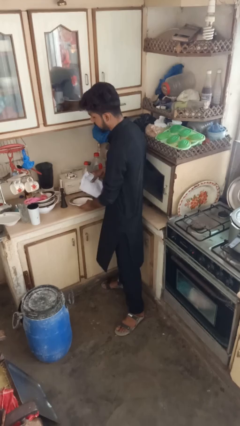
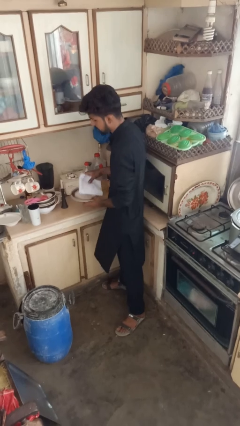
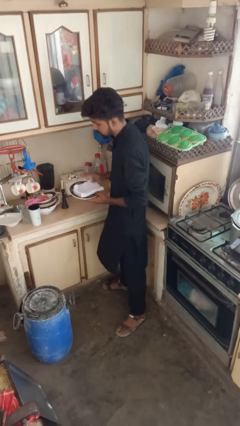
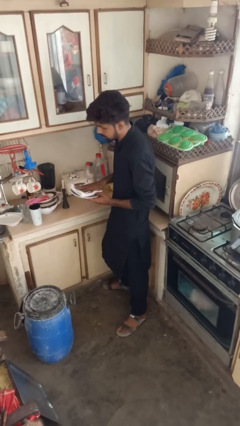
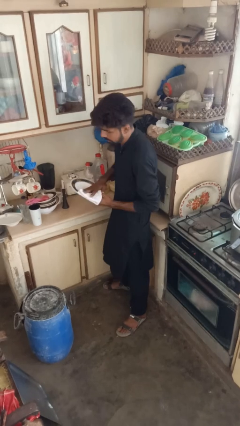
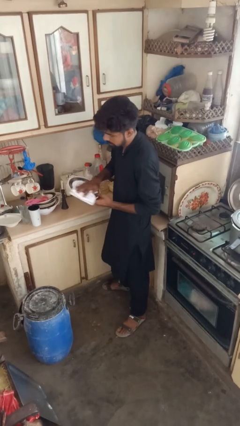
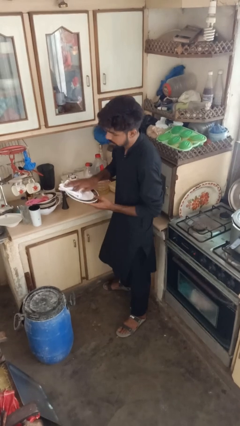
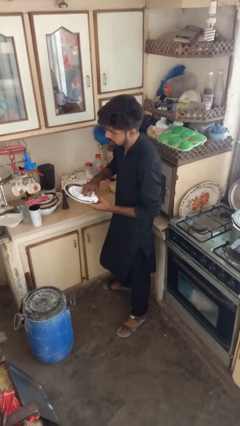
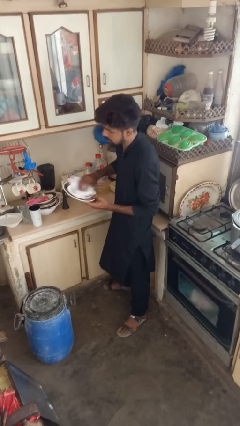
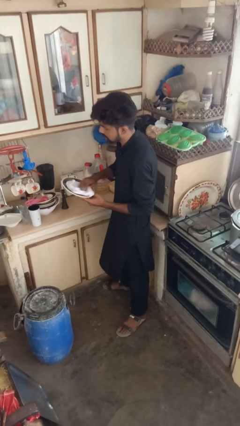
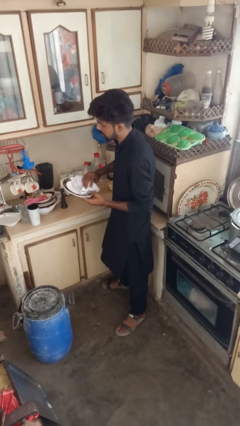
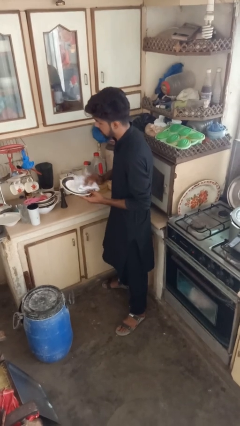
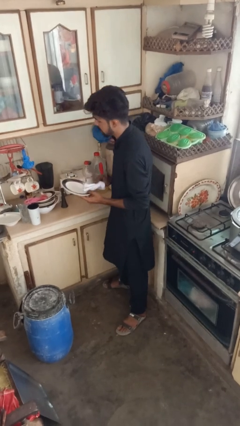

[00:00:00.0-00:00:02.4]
person dries dish

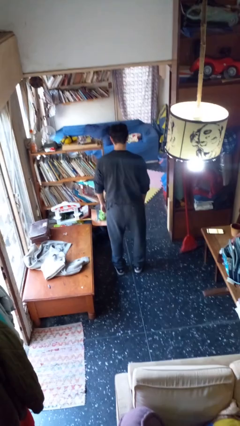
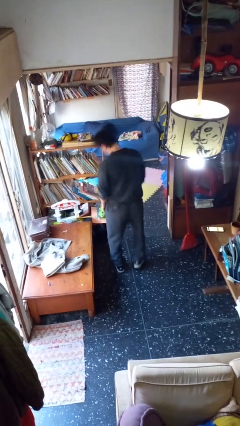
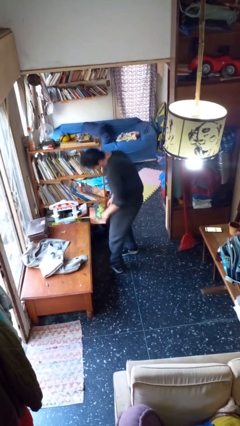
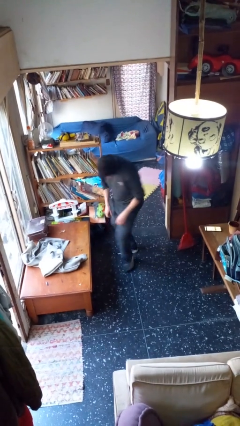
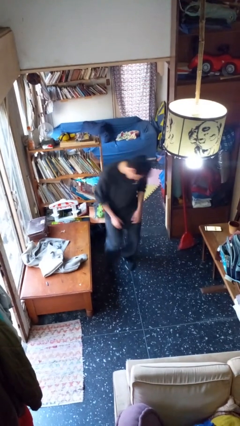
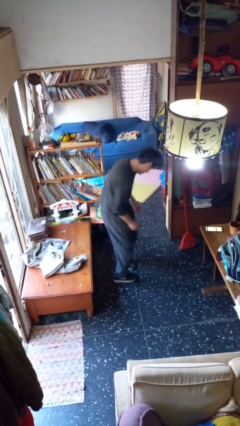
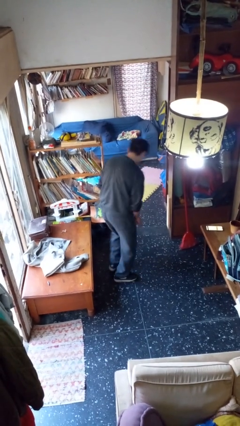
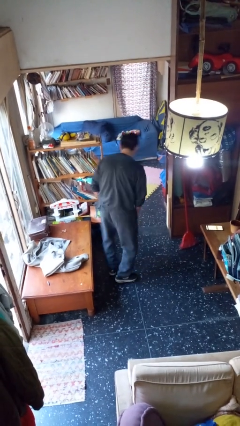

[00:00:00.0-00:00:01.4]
person twirls

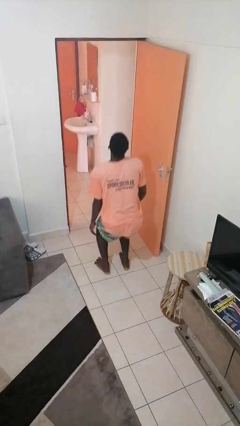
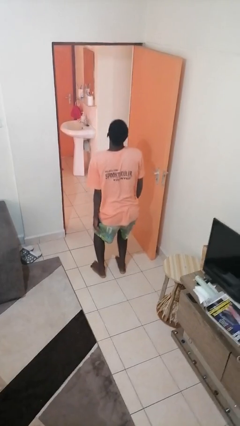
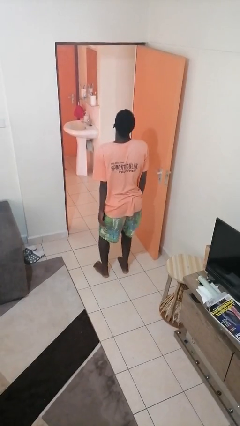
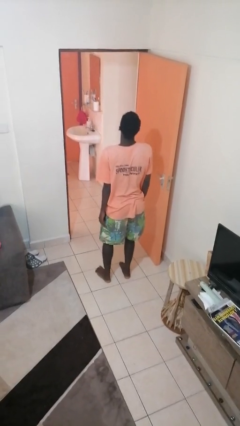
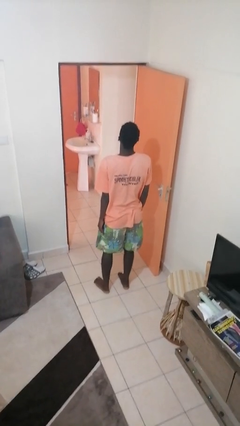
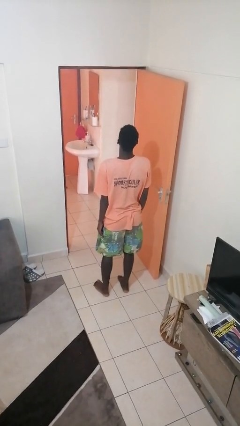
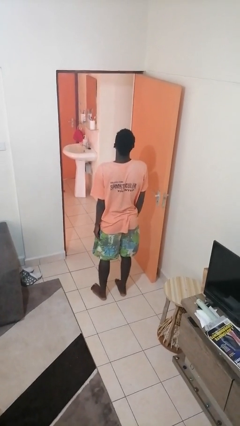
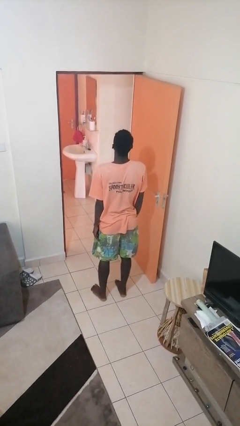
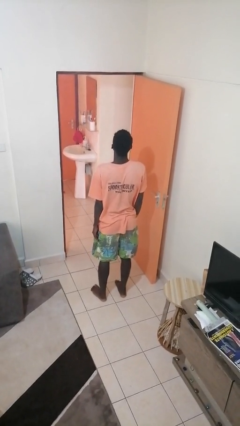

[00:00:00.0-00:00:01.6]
person stands up

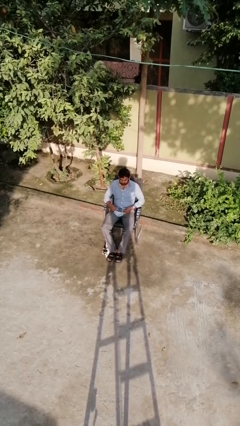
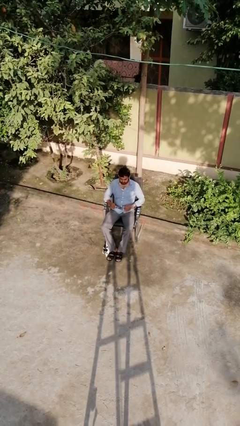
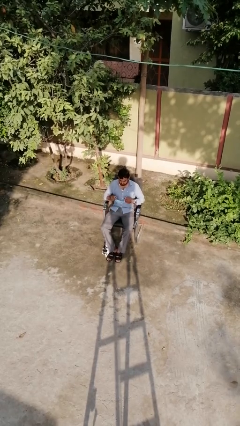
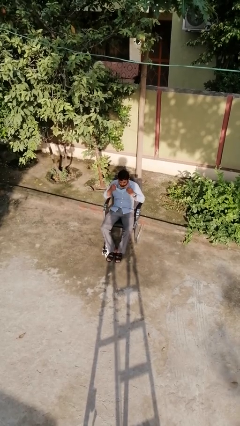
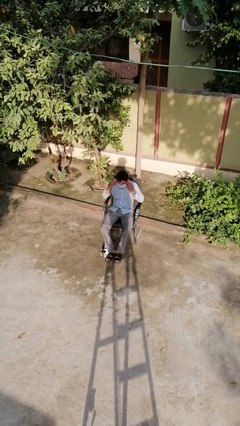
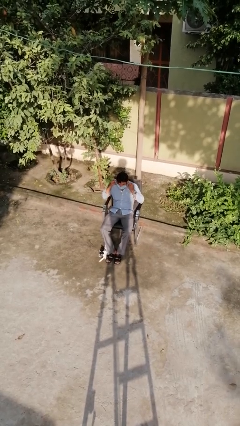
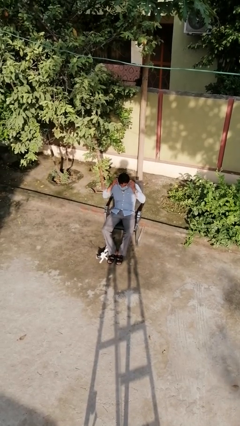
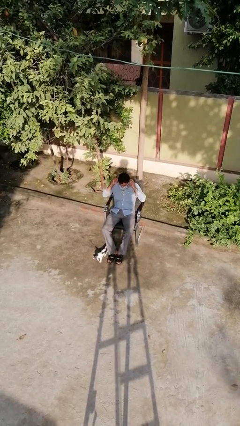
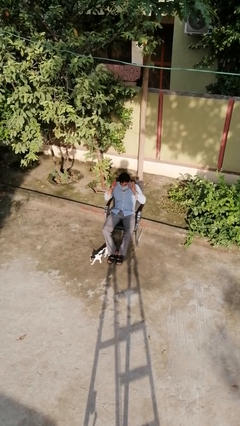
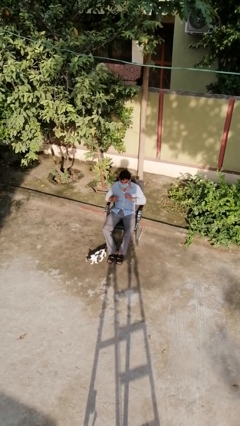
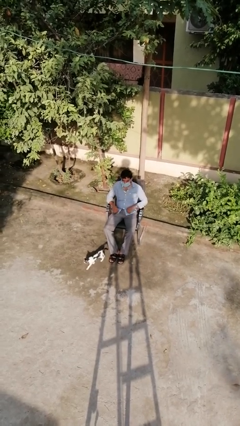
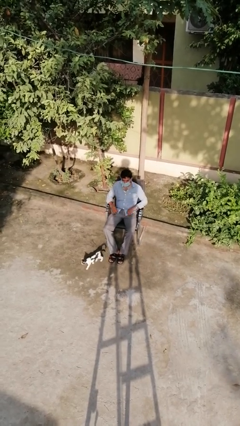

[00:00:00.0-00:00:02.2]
person puts on facemask

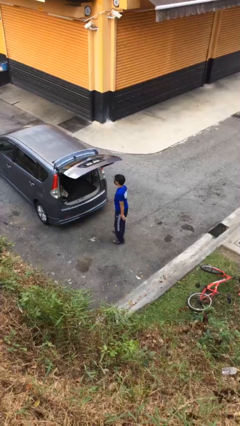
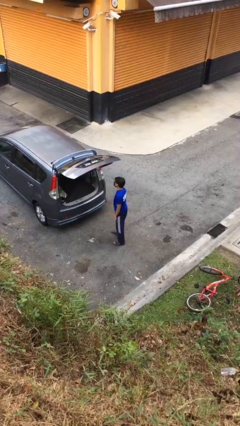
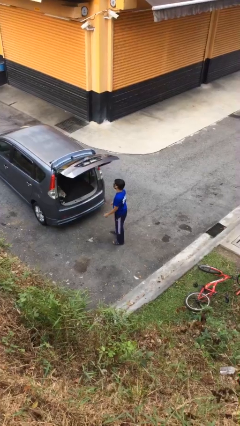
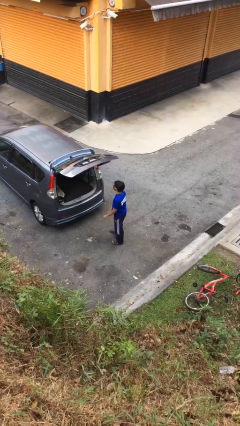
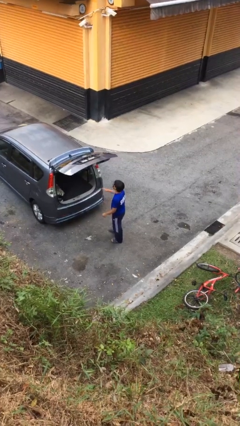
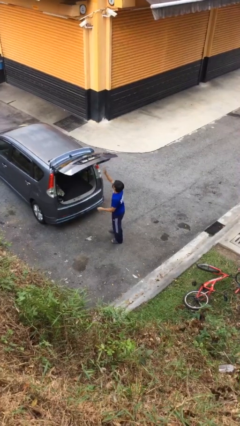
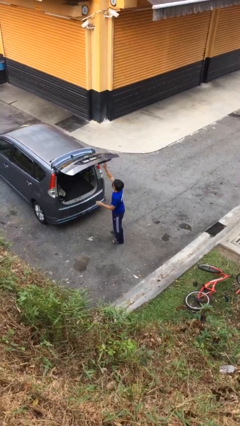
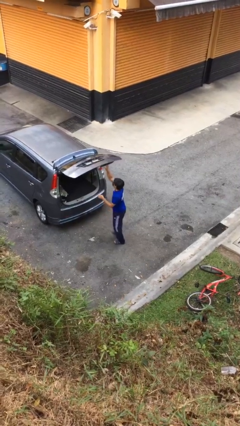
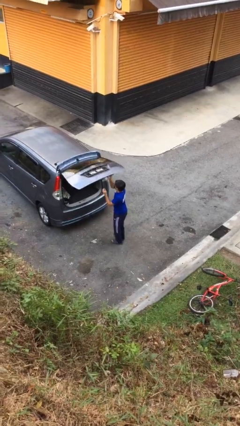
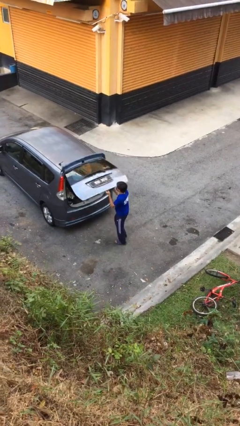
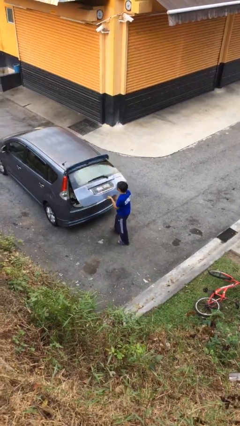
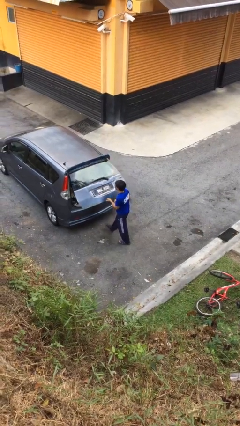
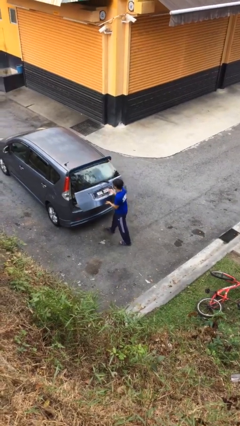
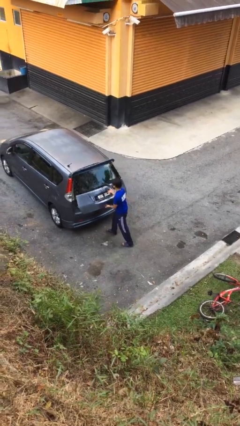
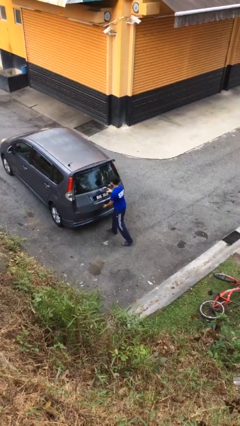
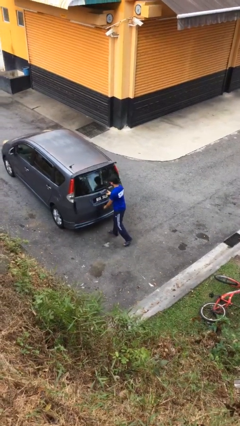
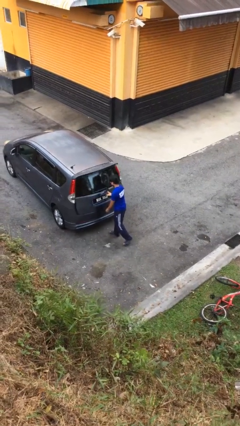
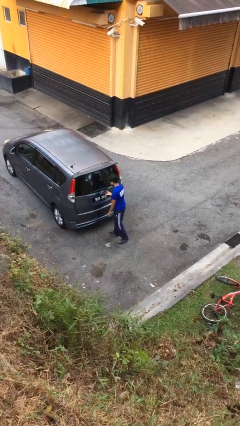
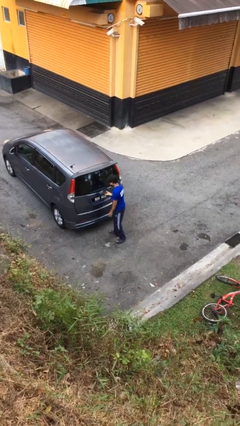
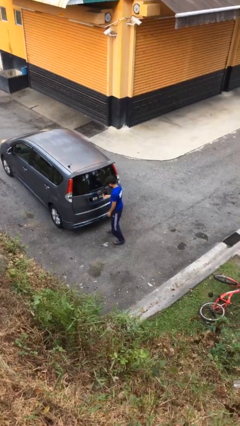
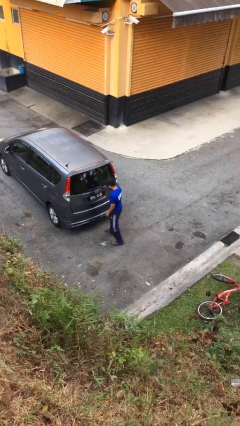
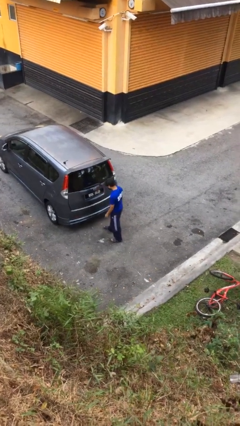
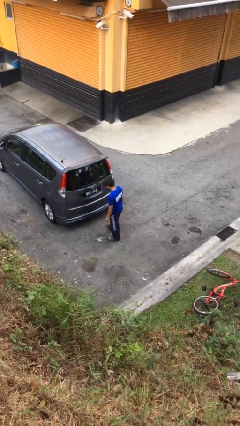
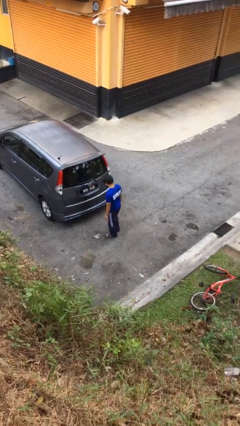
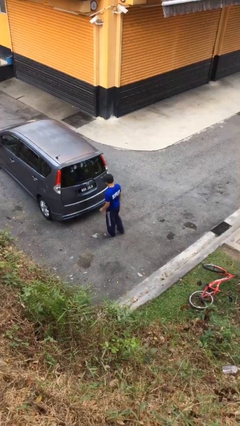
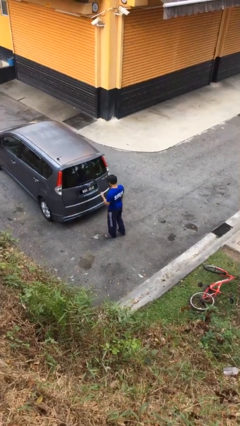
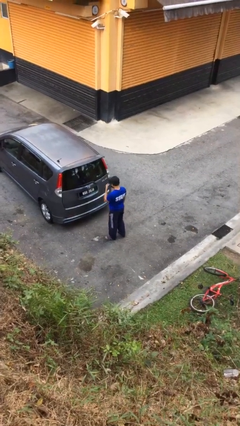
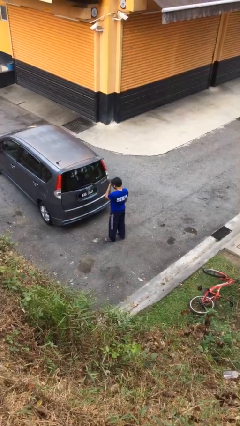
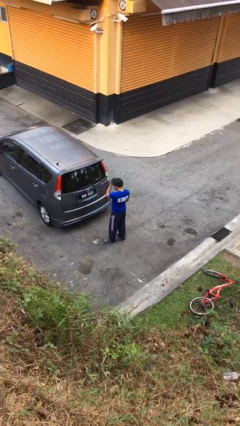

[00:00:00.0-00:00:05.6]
person closes car trunk

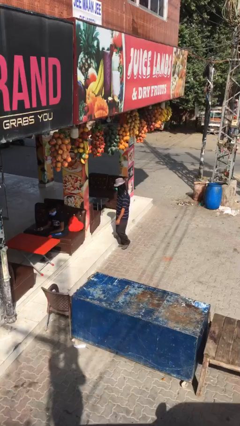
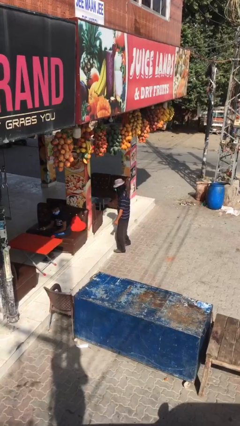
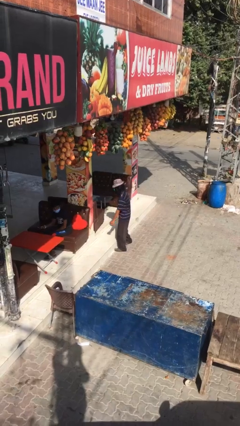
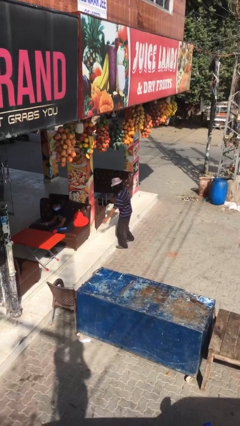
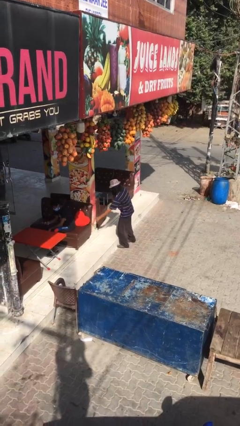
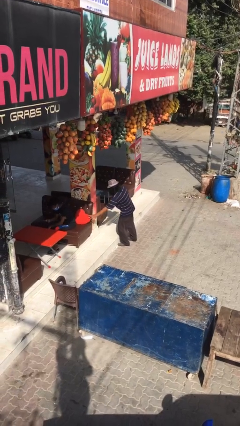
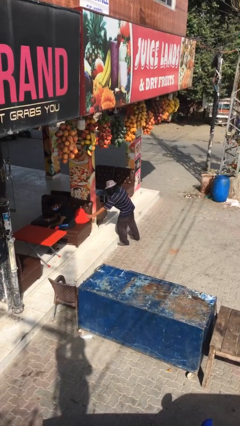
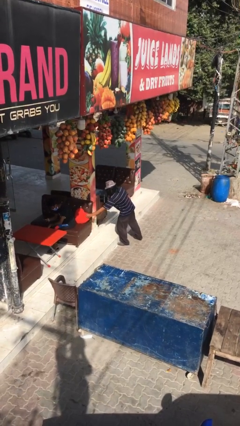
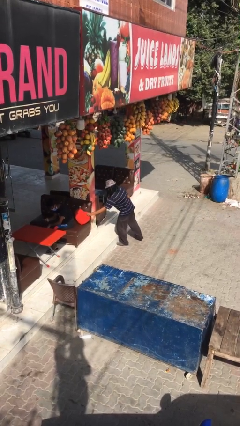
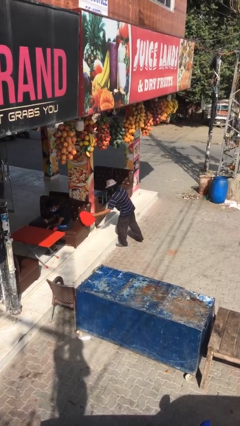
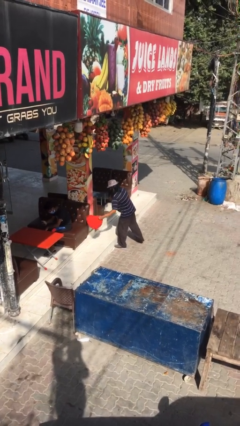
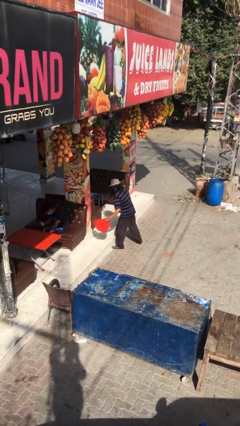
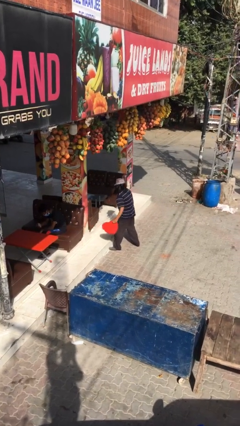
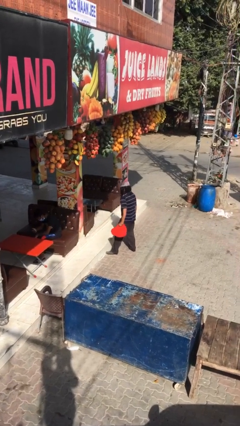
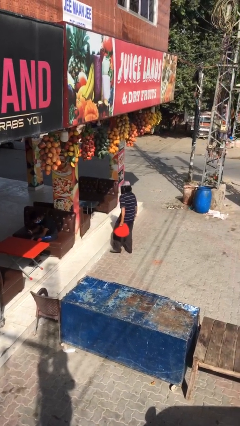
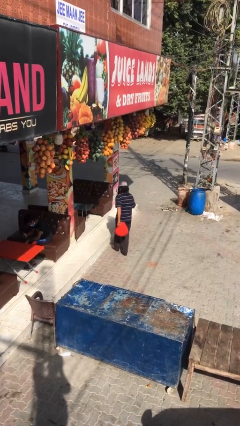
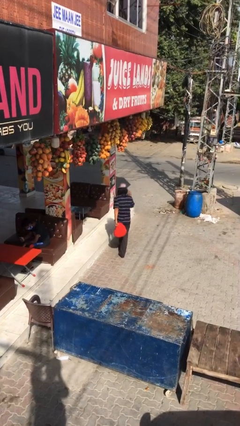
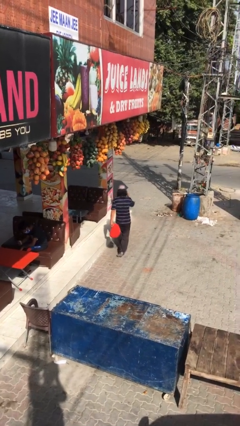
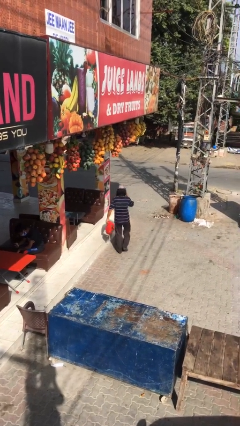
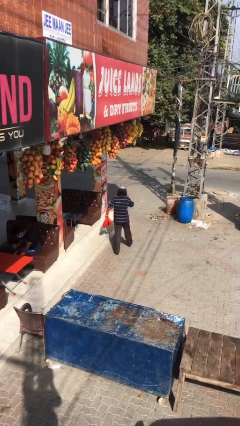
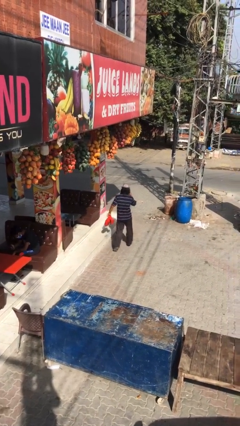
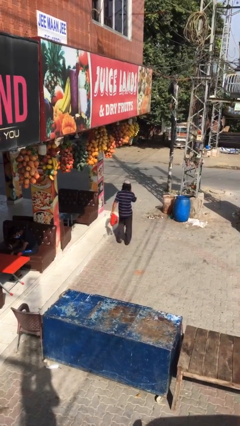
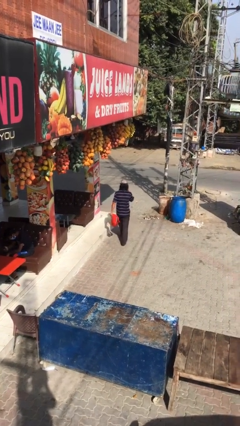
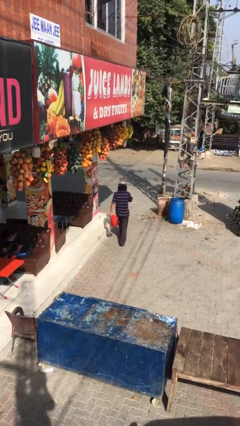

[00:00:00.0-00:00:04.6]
person steals object from person
